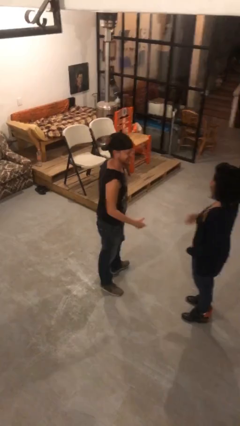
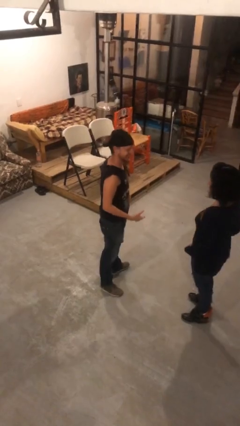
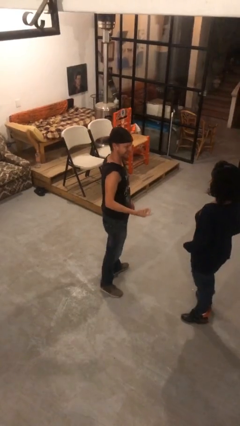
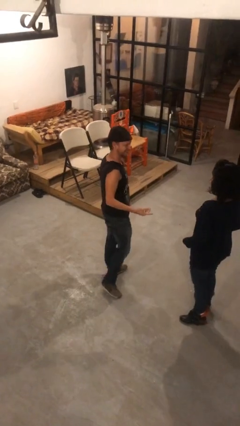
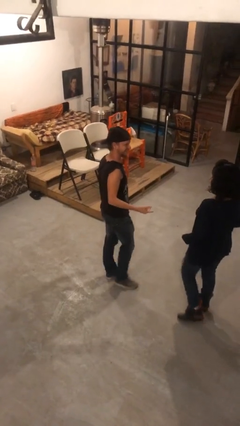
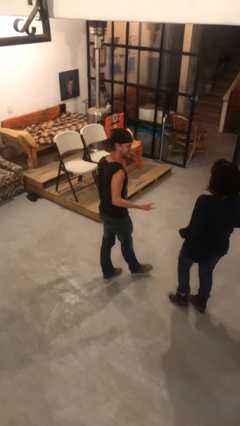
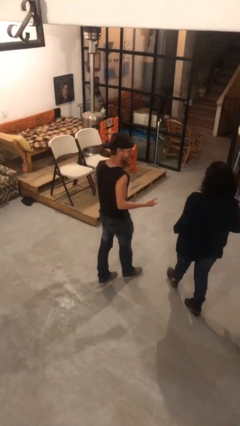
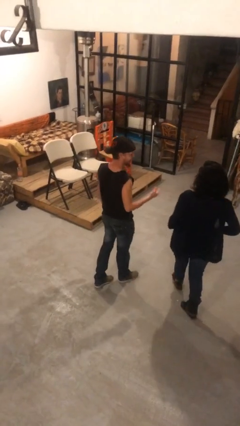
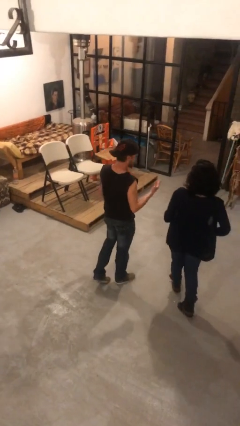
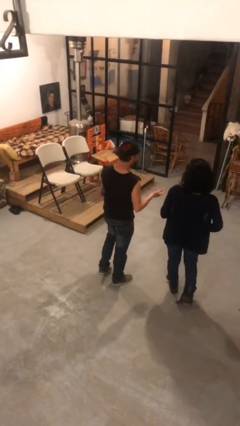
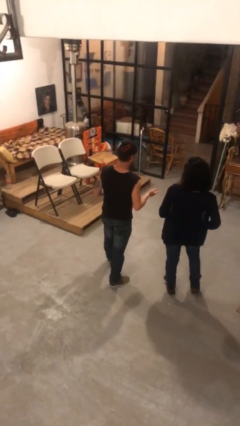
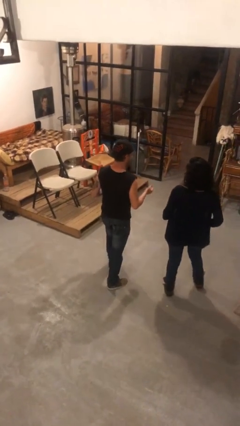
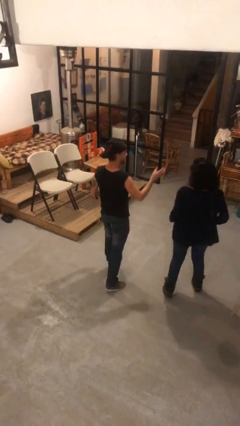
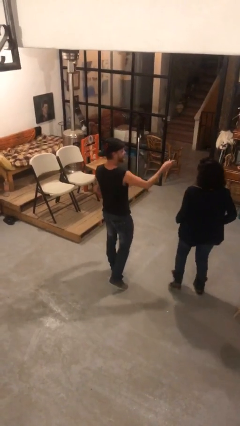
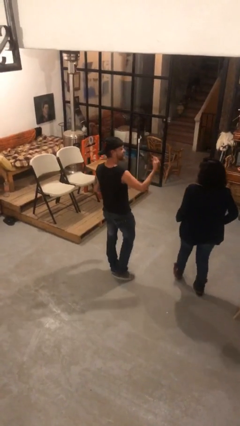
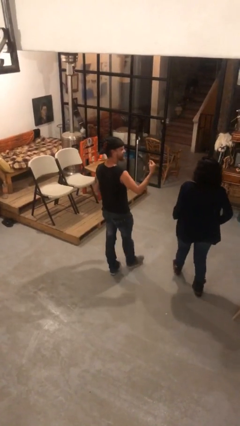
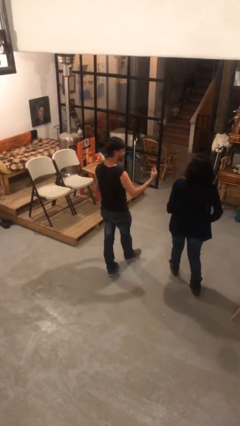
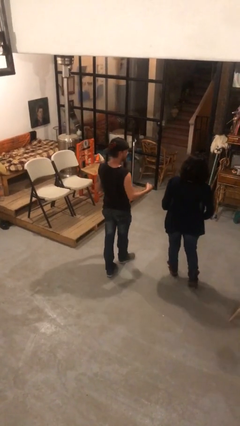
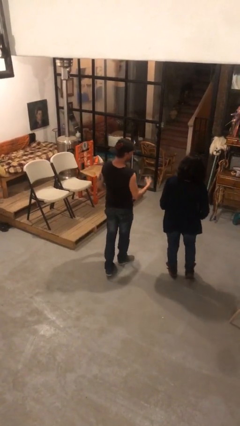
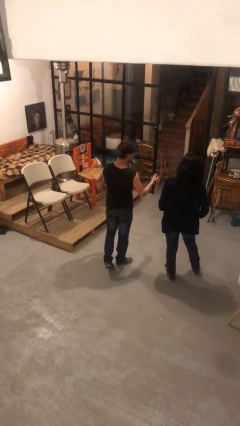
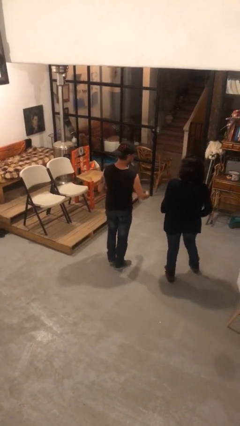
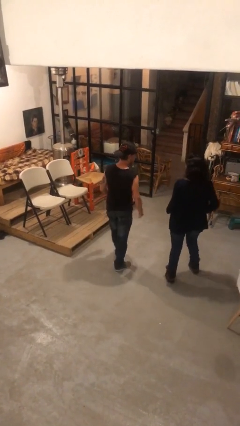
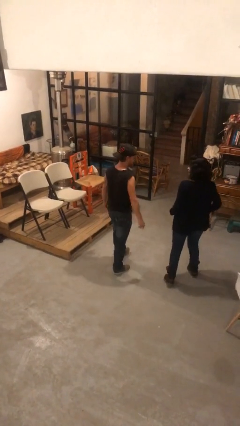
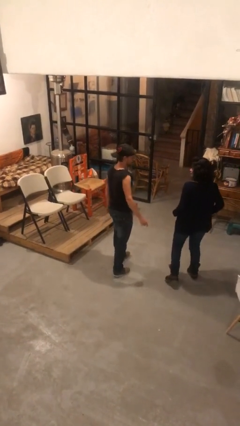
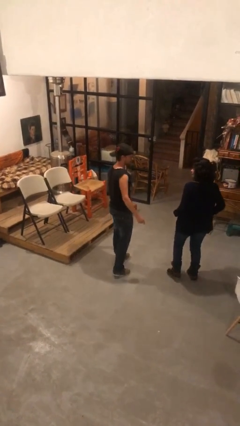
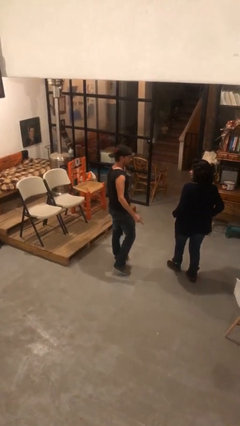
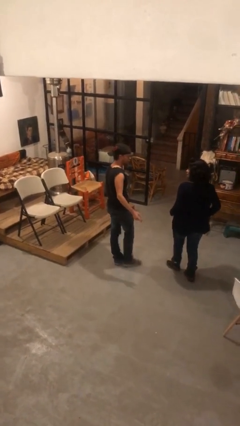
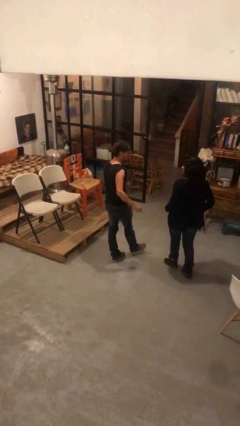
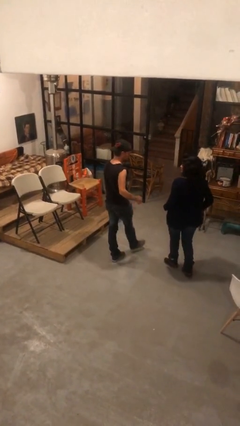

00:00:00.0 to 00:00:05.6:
person talks to person

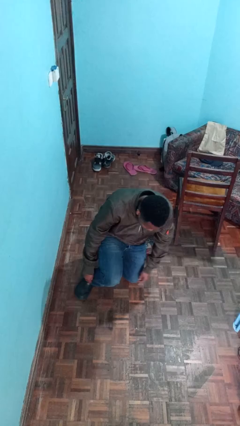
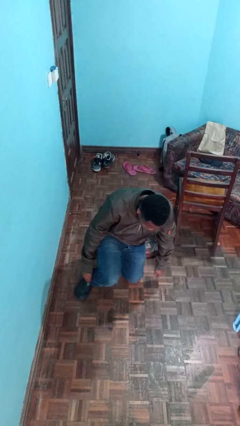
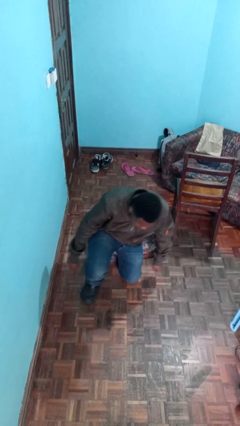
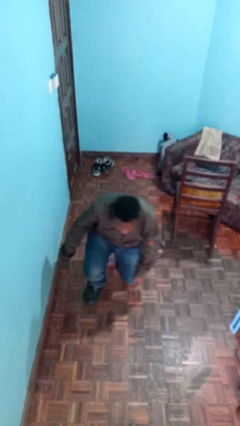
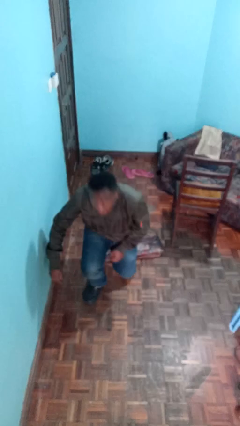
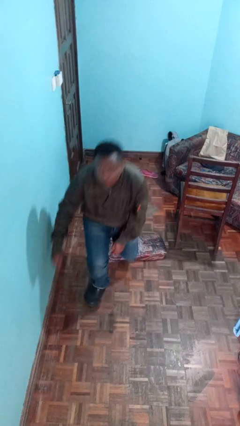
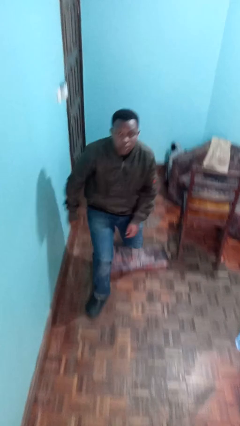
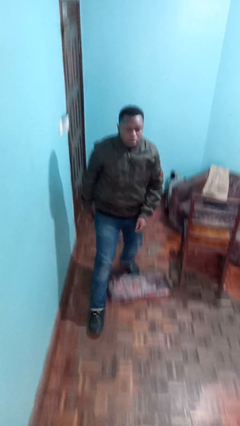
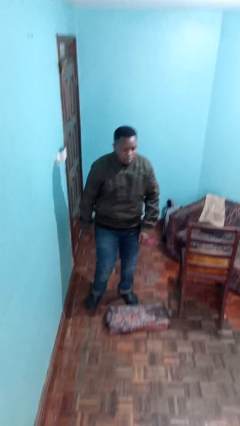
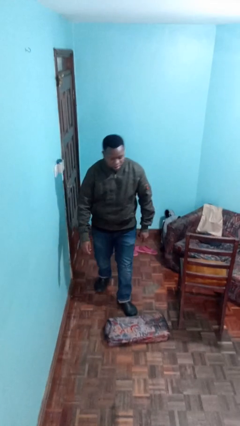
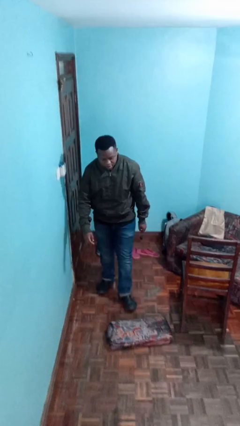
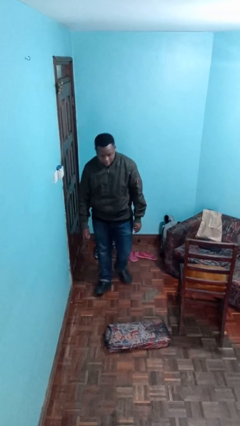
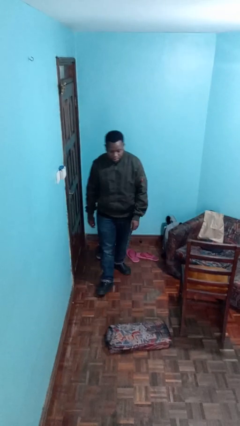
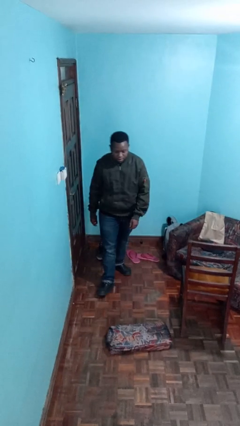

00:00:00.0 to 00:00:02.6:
person stands up from floor

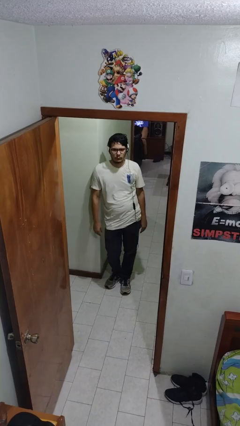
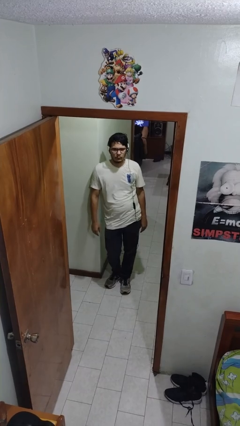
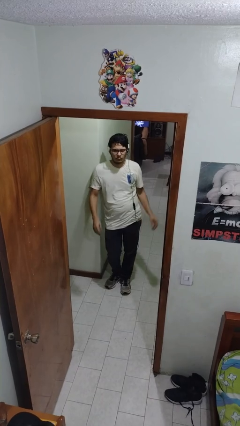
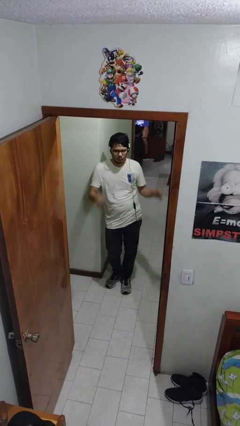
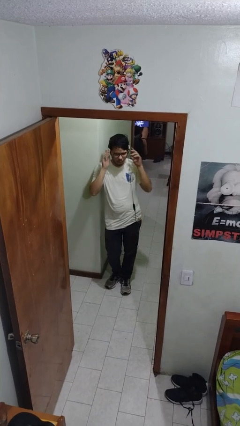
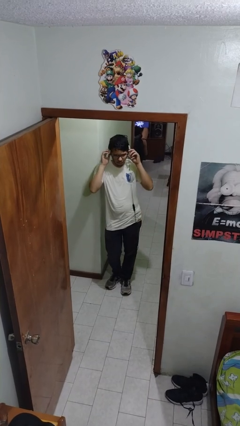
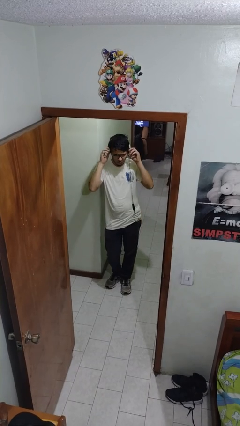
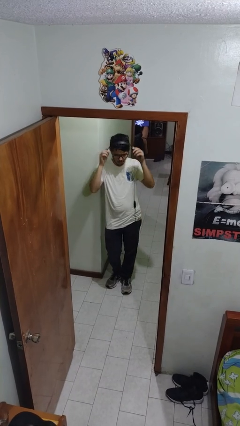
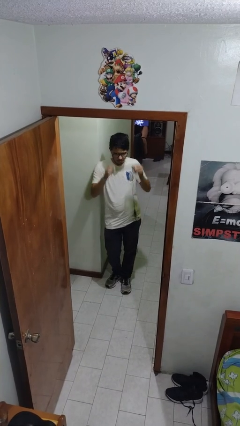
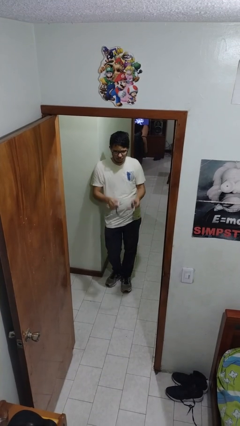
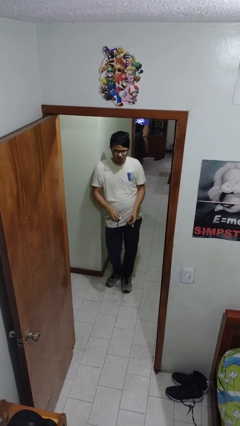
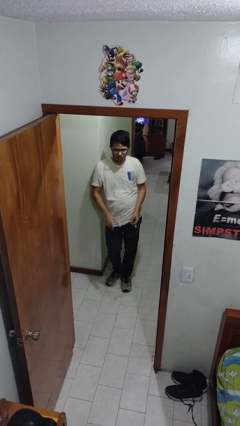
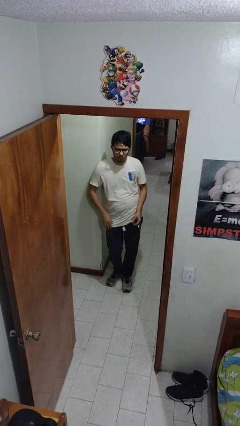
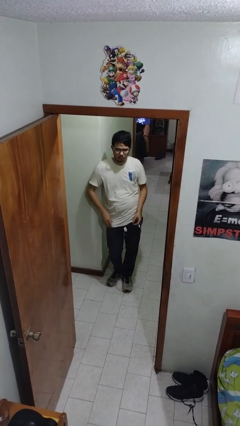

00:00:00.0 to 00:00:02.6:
person takes off headphones

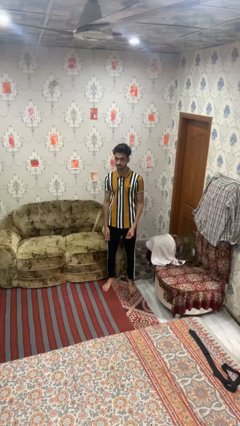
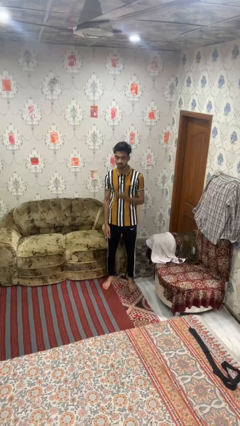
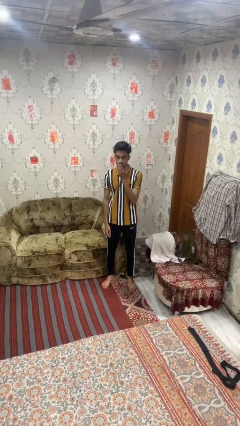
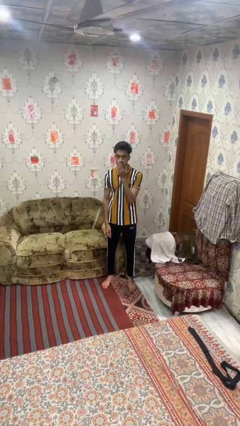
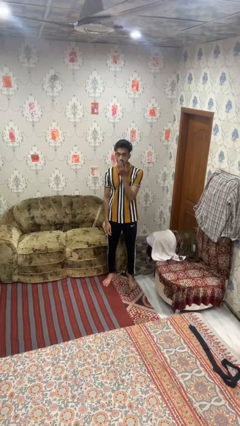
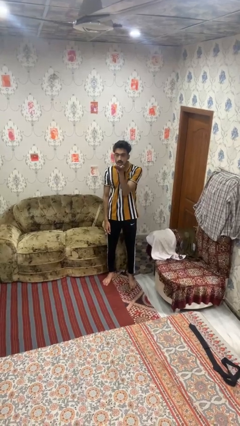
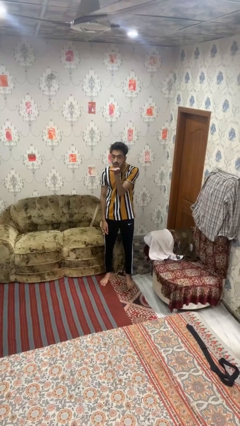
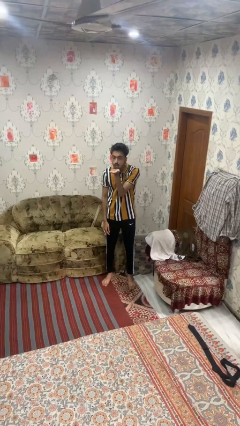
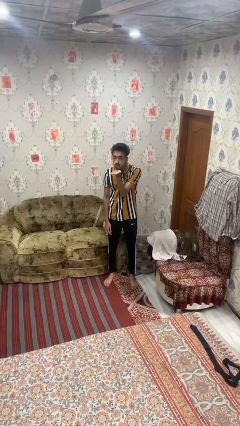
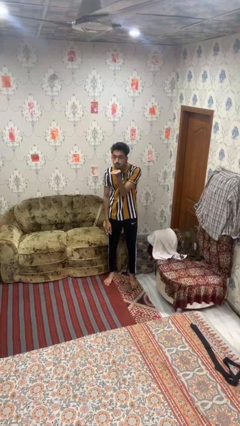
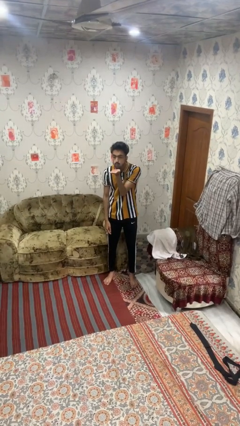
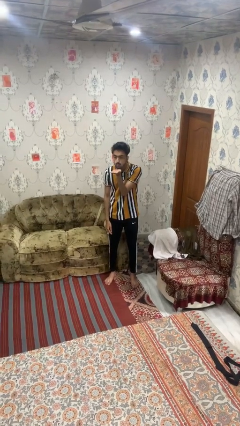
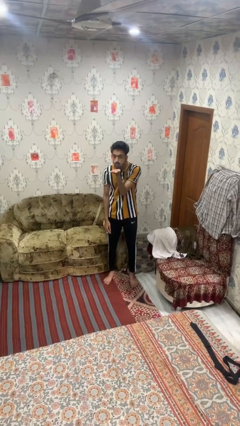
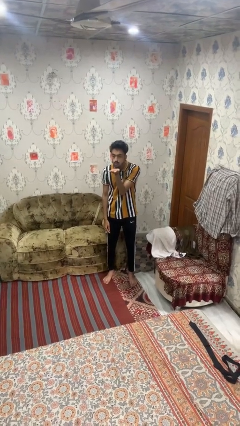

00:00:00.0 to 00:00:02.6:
person gestures blow kiss

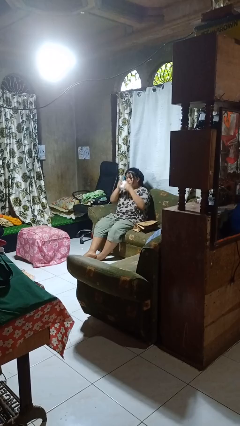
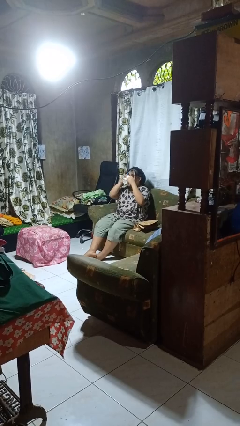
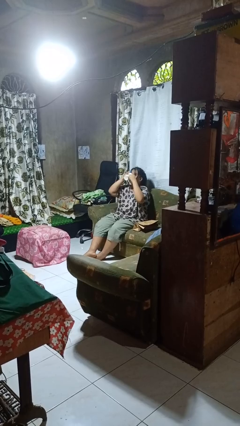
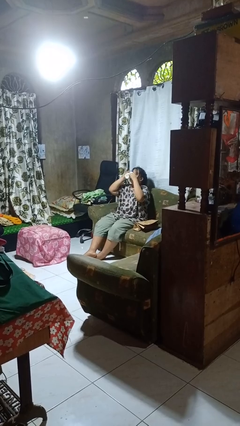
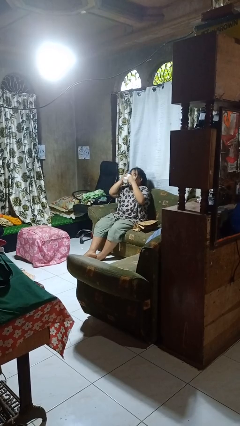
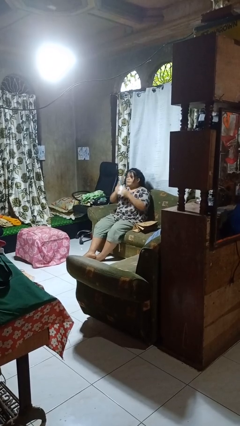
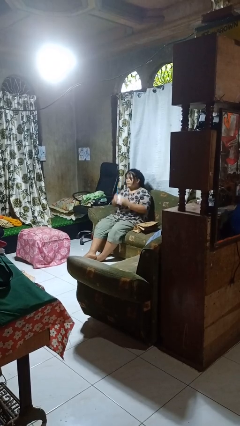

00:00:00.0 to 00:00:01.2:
person drinks from mug

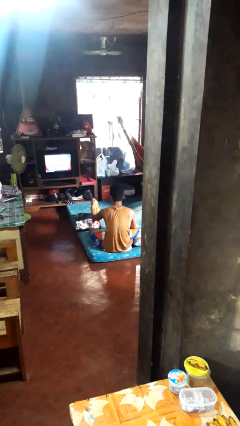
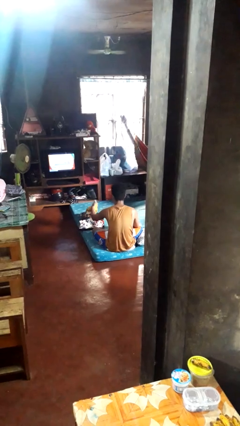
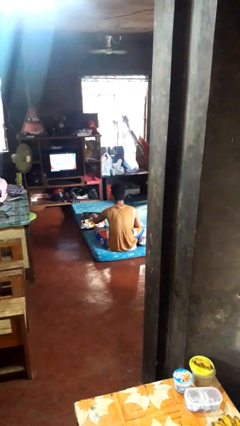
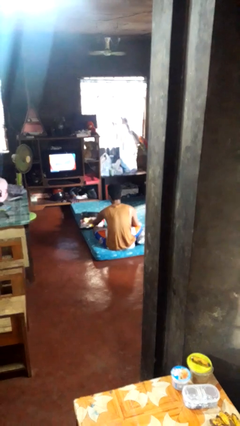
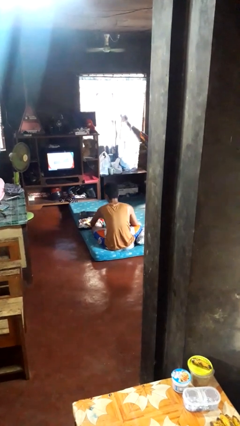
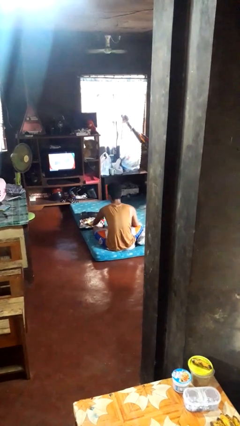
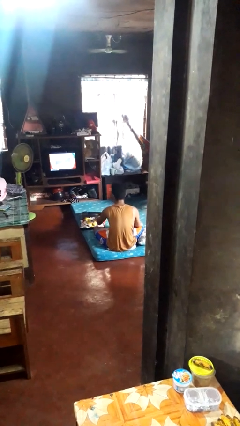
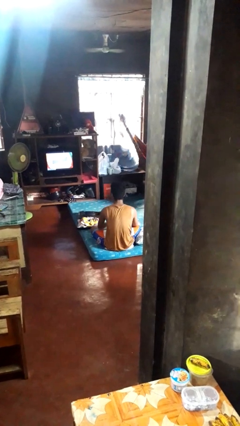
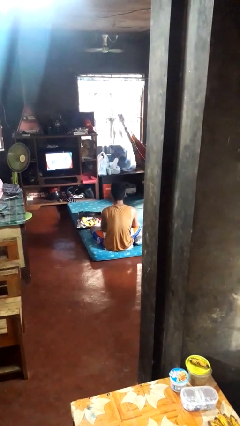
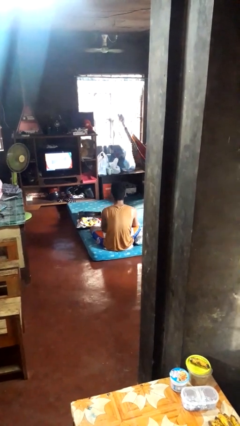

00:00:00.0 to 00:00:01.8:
person loads clothes into suitcase

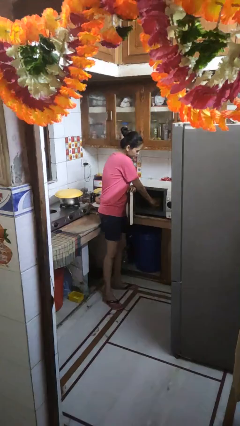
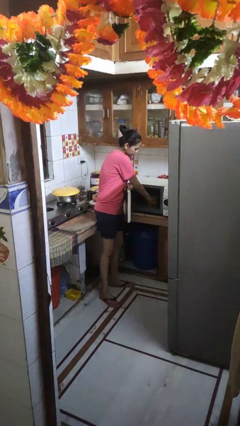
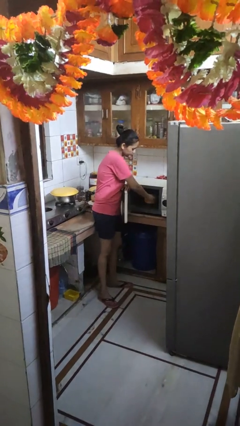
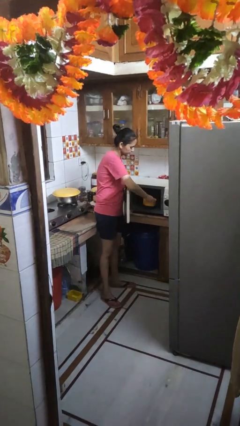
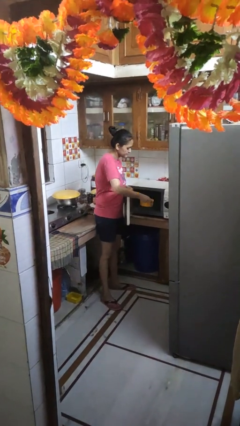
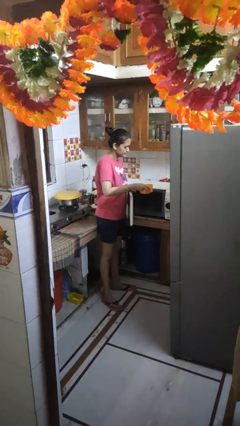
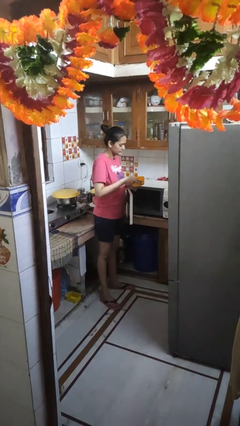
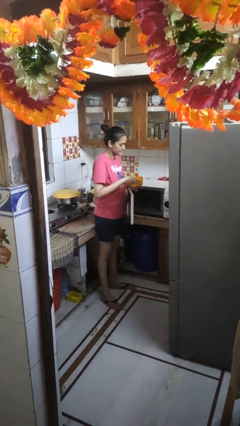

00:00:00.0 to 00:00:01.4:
person takes object from microwave
